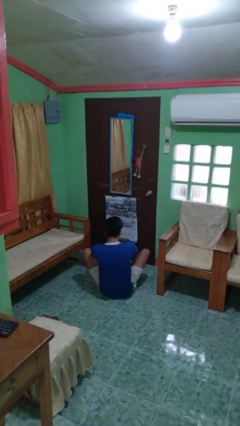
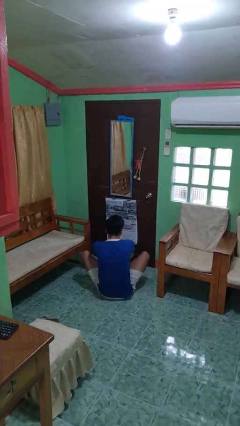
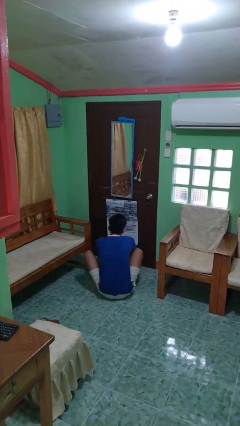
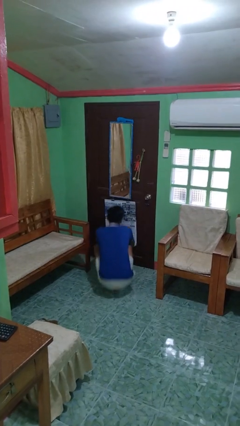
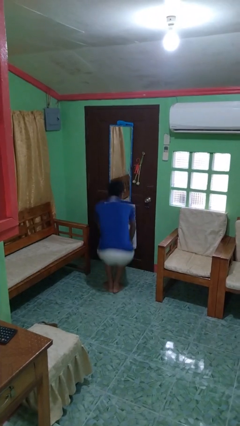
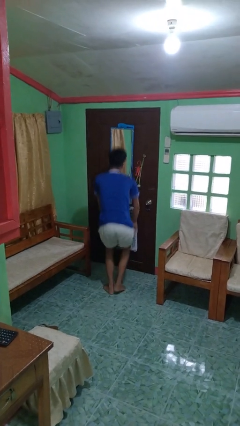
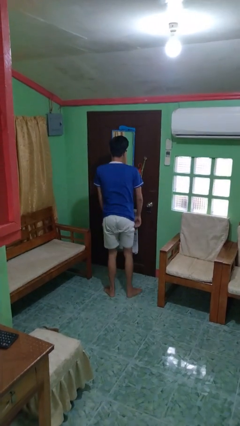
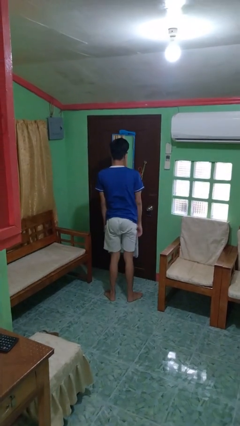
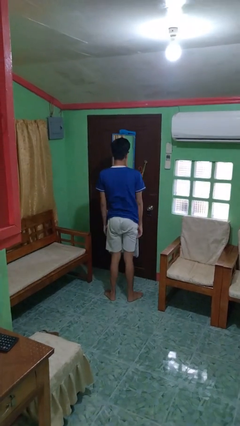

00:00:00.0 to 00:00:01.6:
person stands up from floor

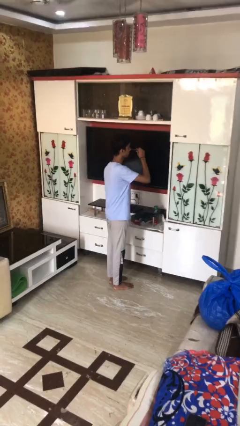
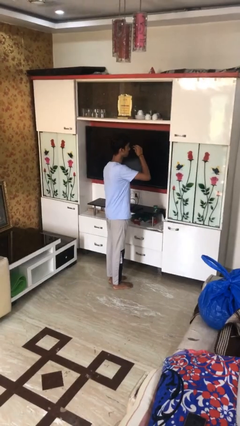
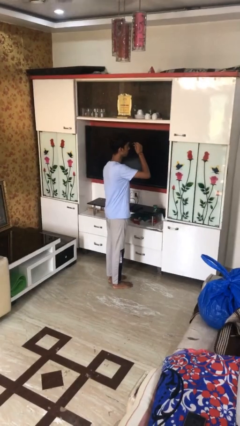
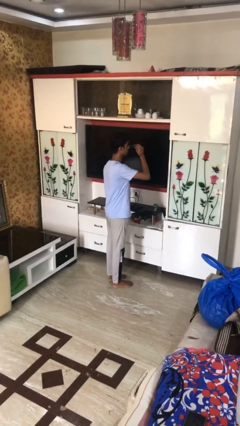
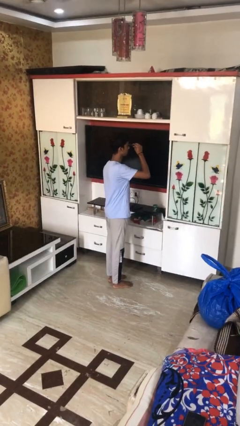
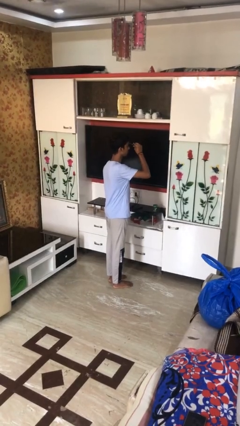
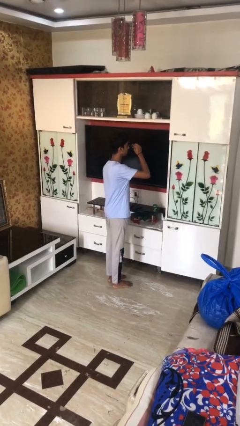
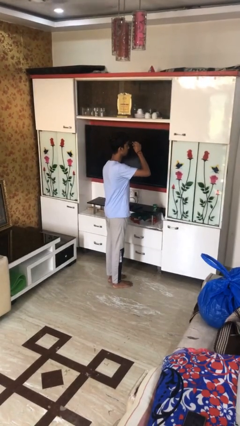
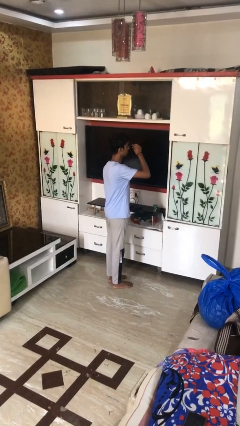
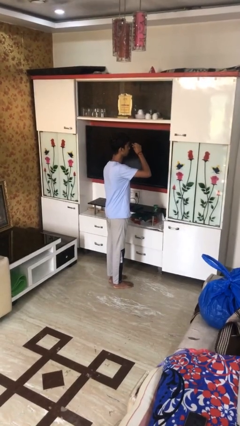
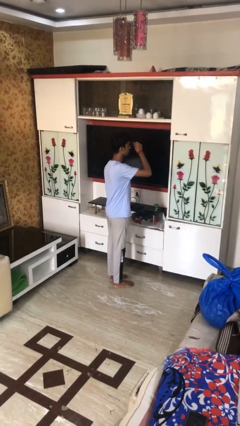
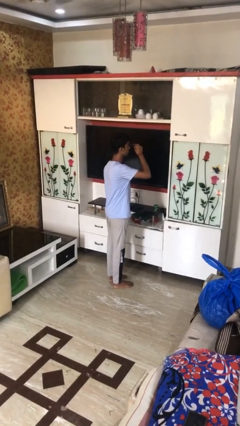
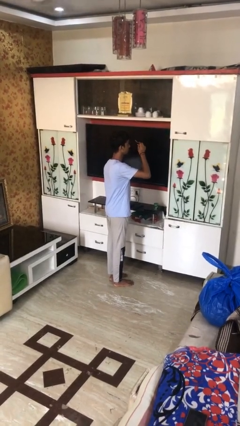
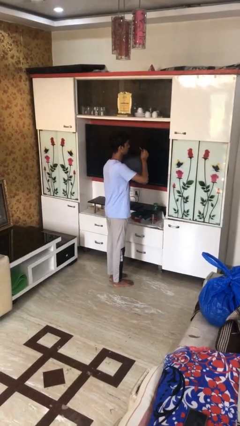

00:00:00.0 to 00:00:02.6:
person applies eye makeup

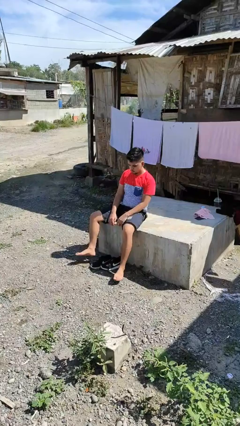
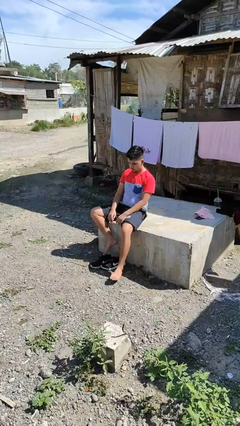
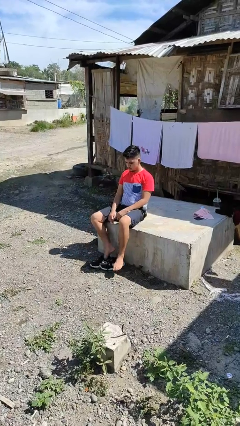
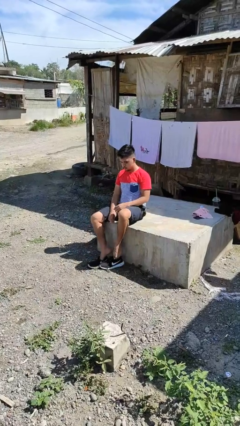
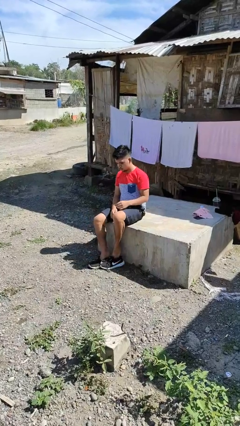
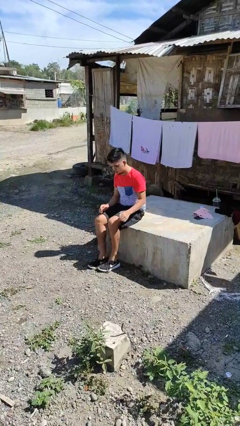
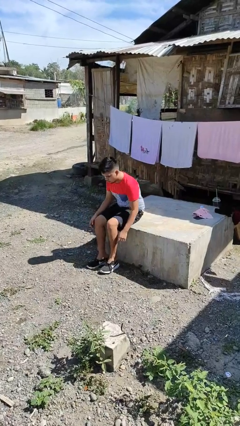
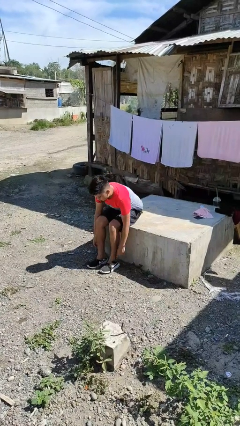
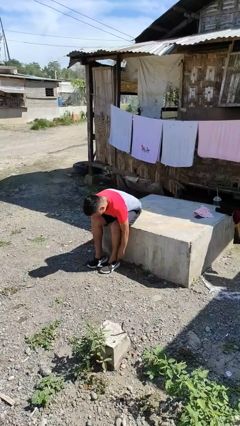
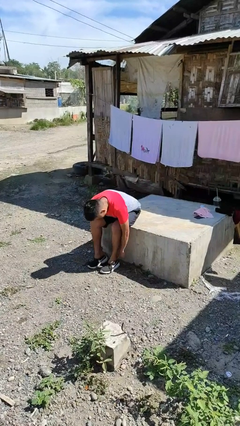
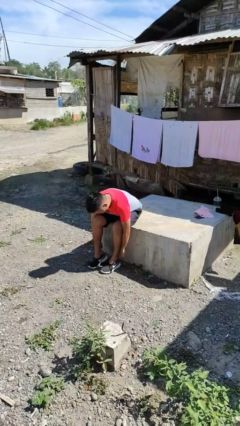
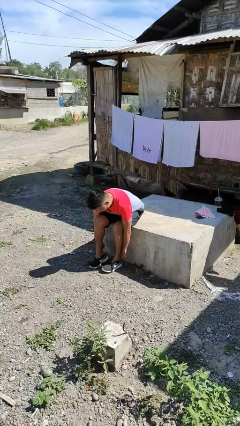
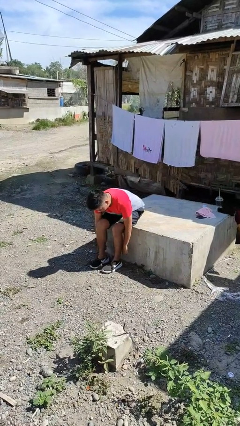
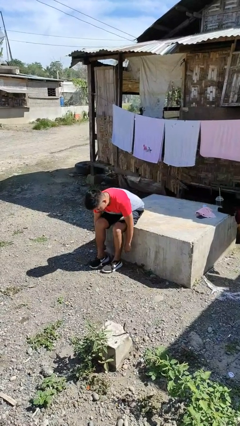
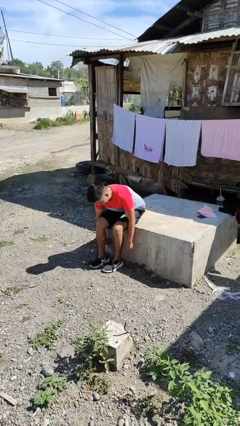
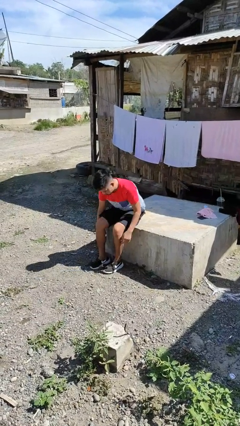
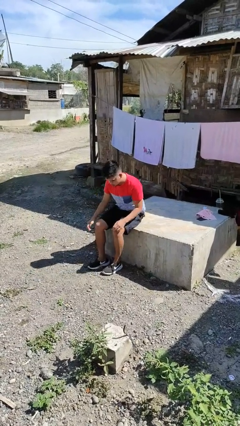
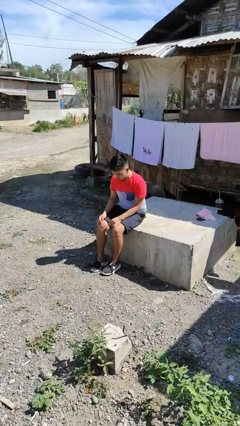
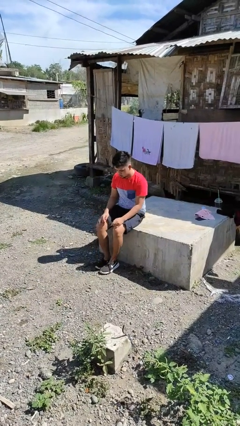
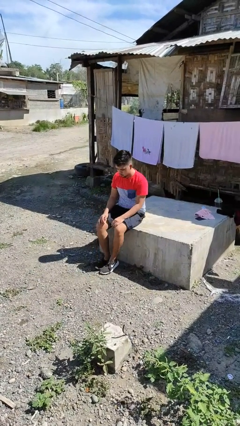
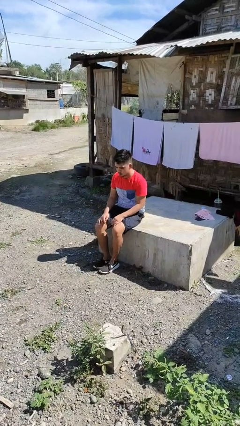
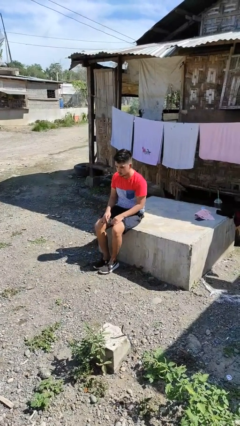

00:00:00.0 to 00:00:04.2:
person puts on shoes

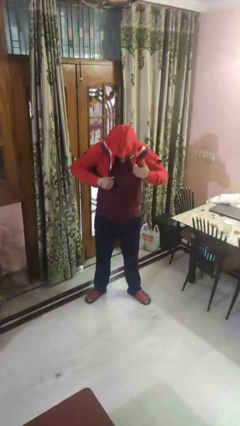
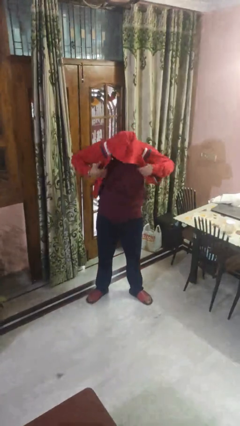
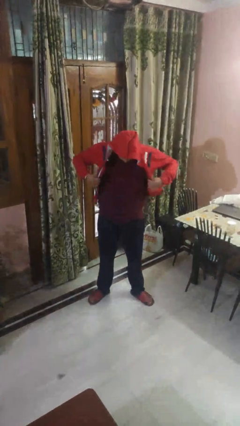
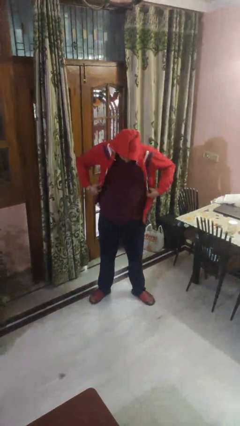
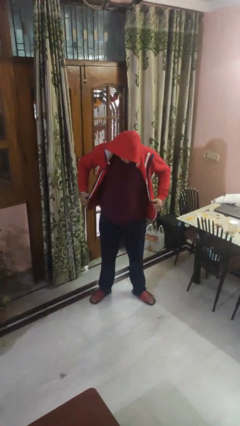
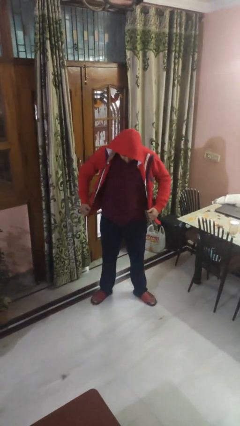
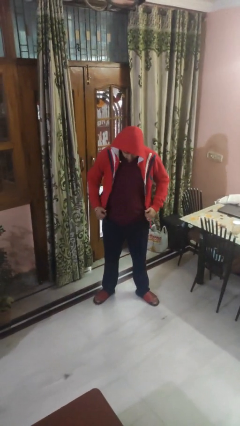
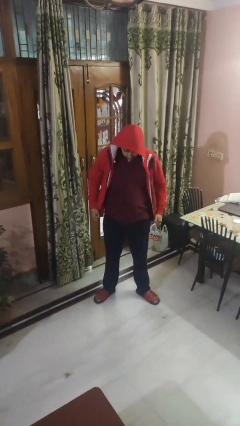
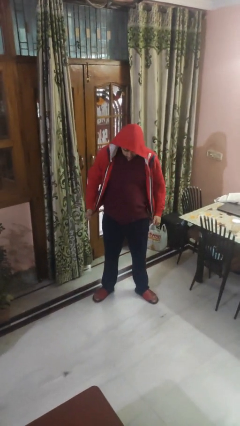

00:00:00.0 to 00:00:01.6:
person puts on hoodie

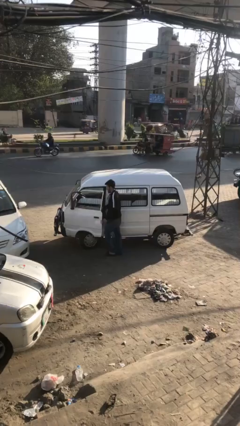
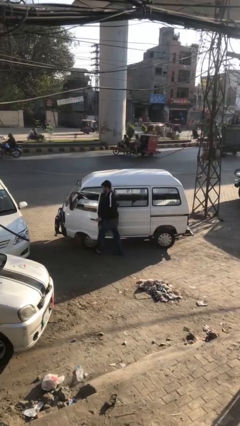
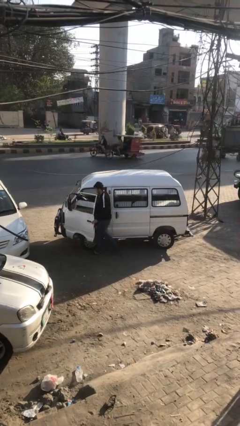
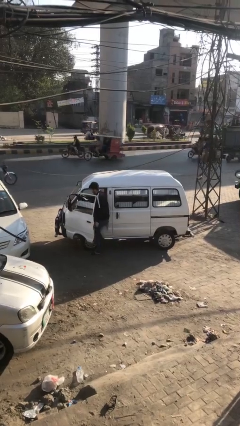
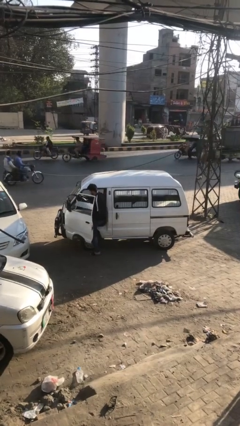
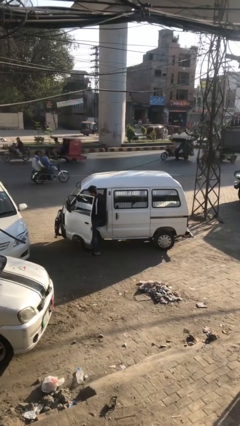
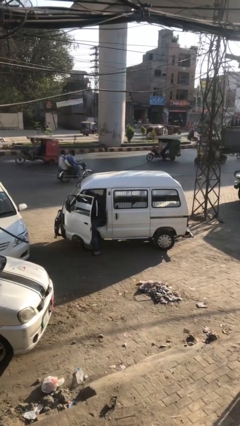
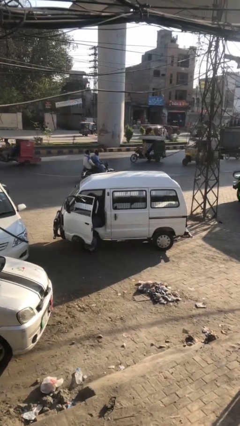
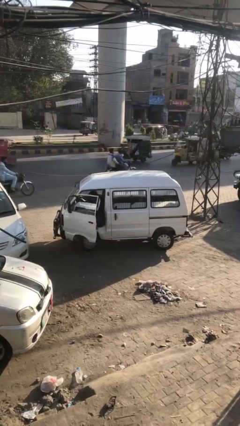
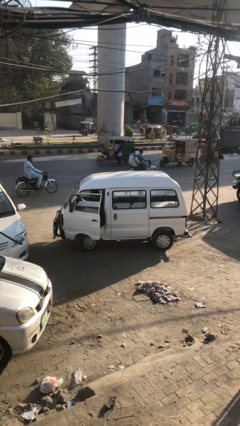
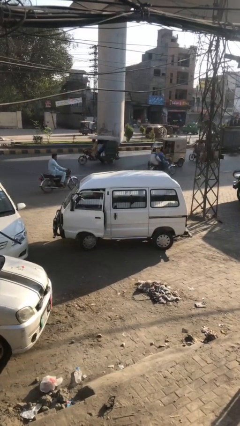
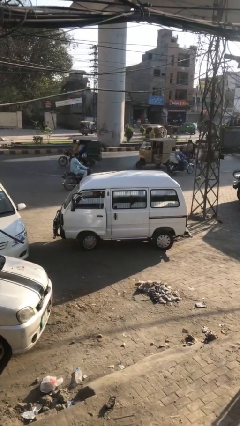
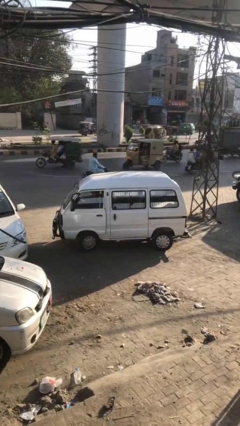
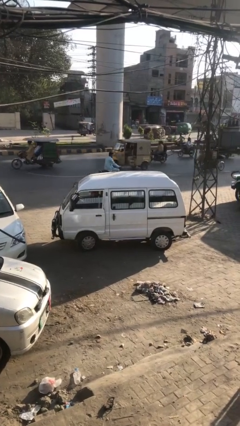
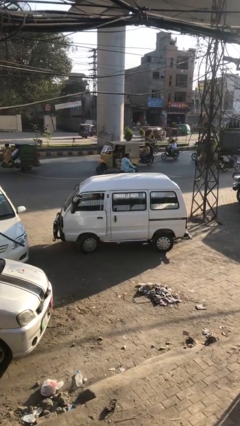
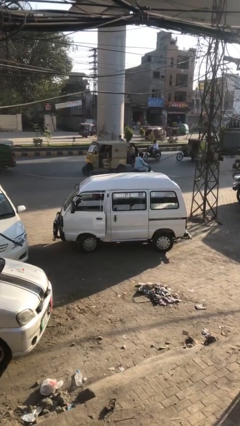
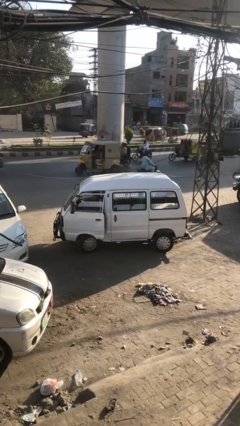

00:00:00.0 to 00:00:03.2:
car picks up person

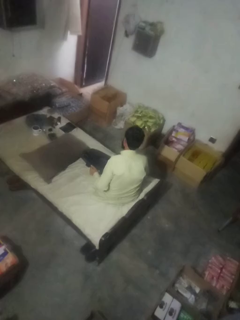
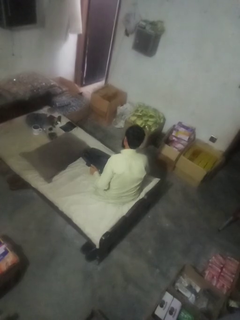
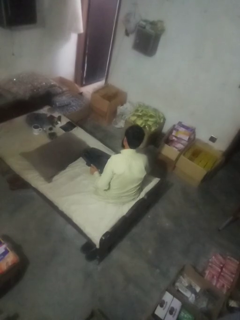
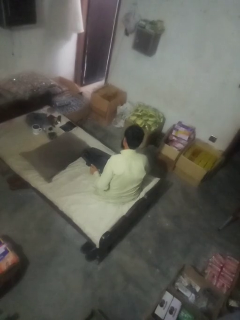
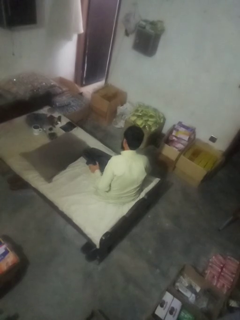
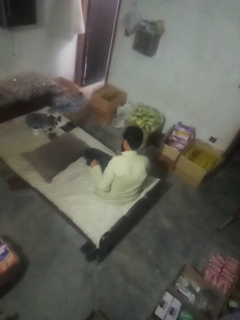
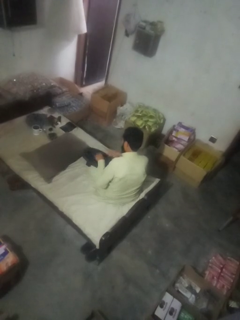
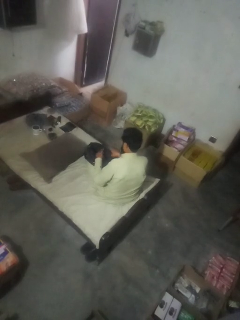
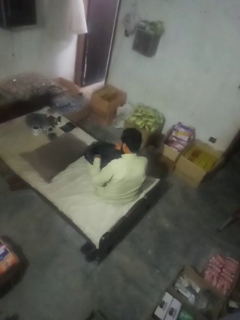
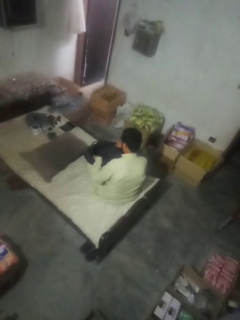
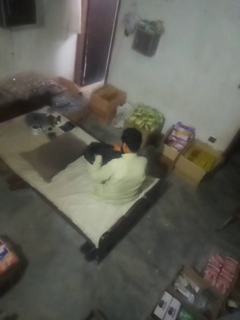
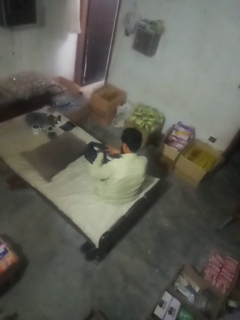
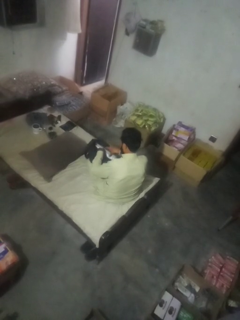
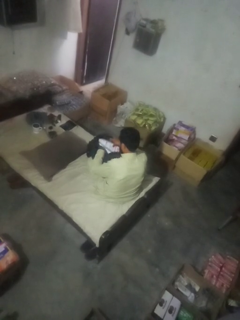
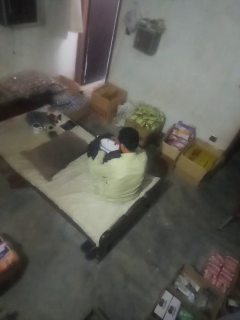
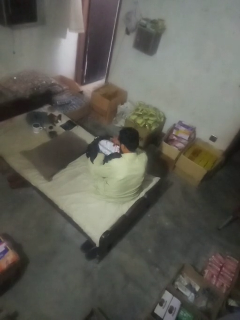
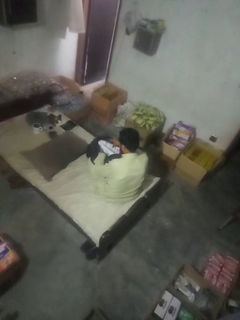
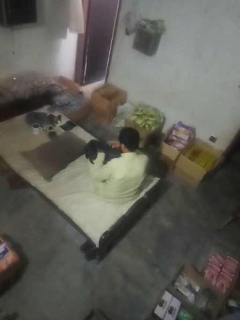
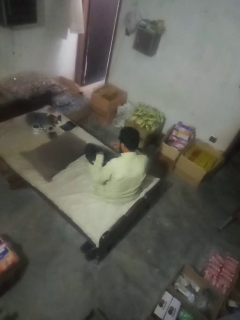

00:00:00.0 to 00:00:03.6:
person searches in bag

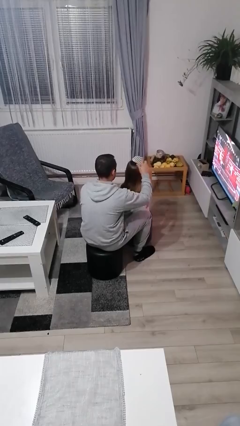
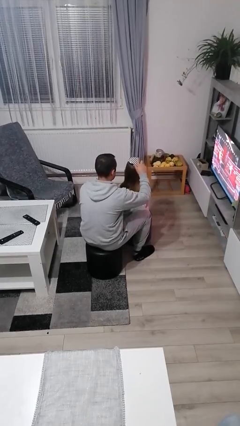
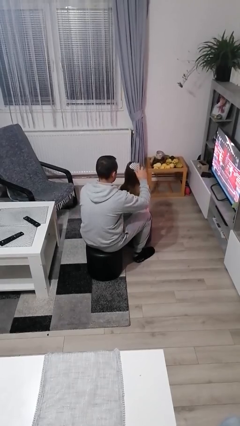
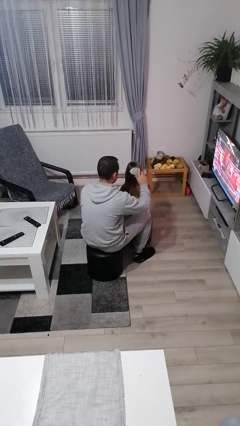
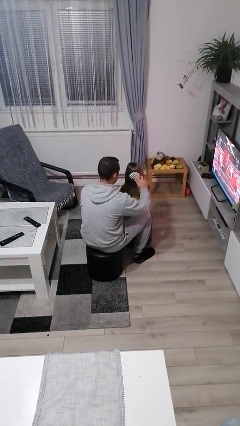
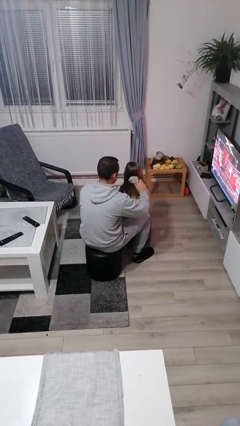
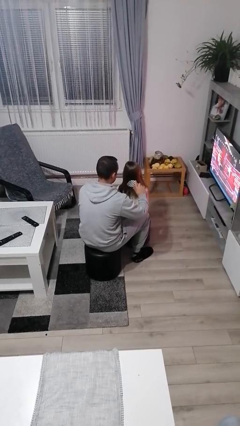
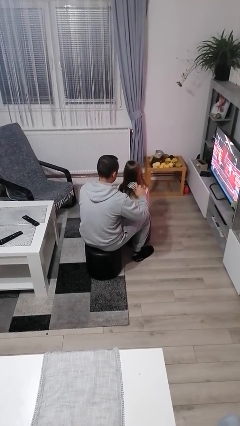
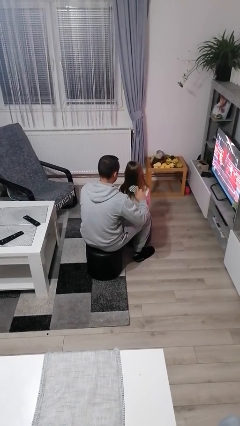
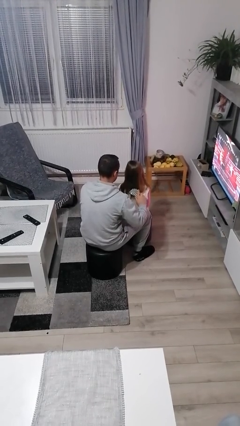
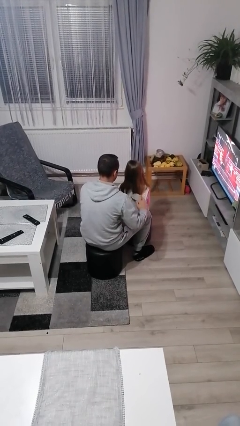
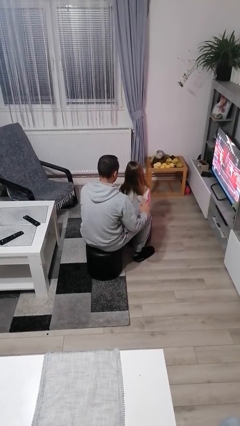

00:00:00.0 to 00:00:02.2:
person brushes hair of person
